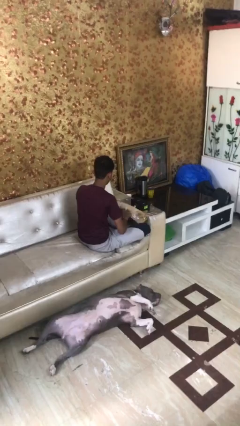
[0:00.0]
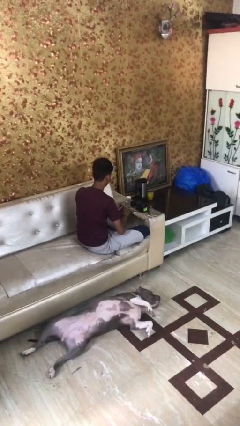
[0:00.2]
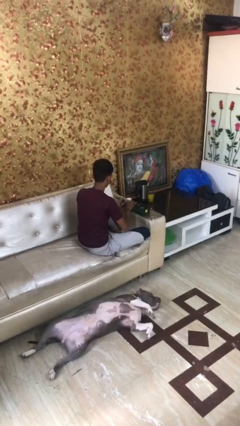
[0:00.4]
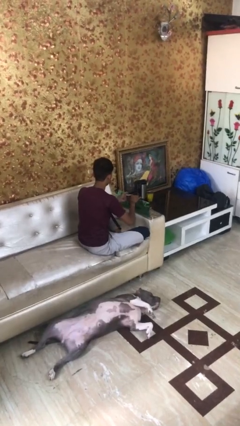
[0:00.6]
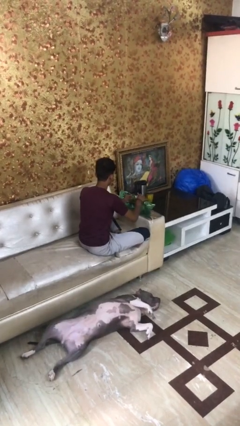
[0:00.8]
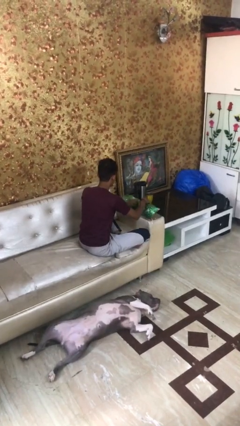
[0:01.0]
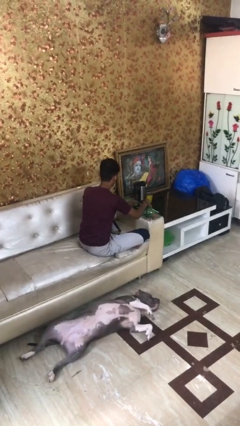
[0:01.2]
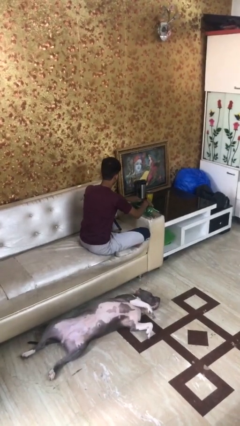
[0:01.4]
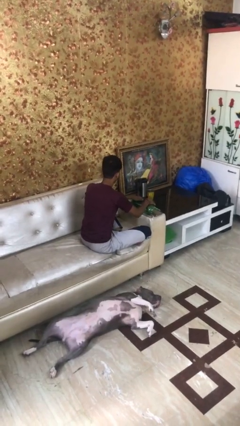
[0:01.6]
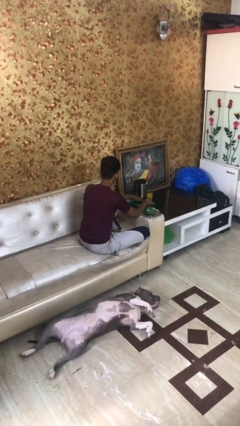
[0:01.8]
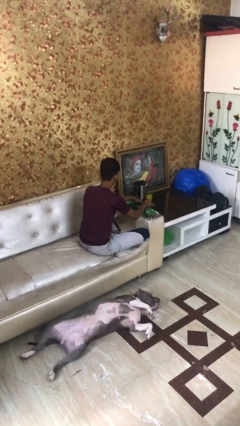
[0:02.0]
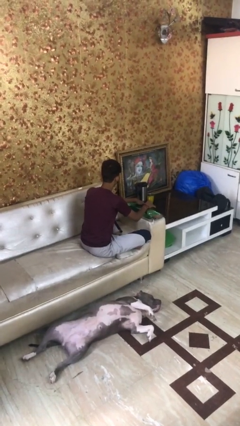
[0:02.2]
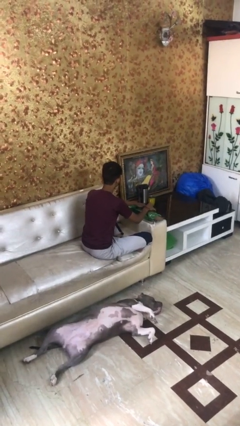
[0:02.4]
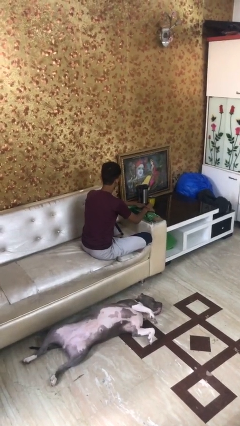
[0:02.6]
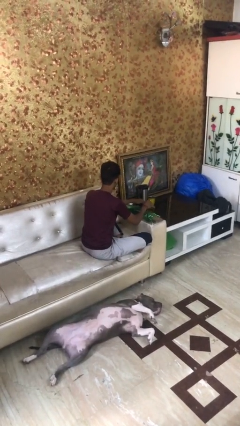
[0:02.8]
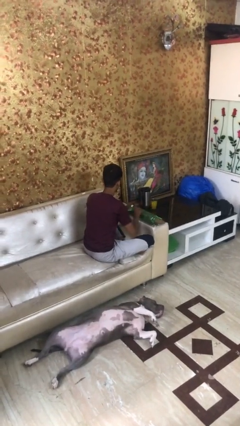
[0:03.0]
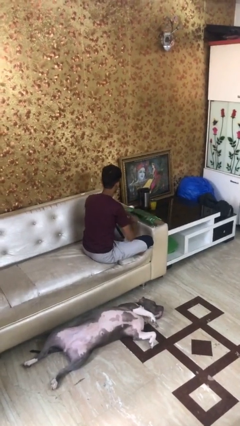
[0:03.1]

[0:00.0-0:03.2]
person wraps box

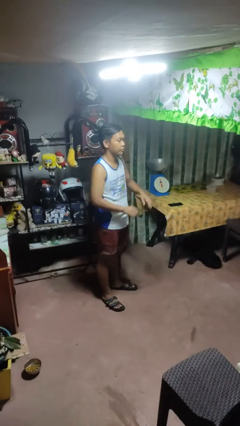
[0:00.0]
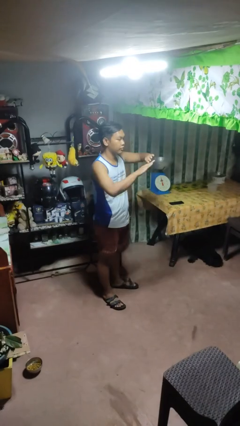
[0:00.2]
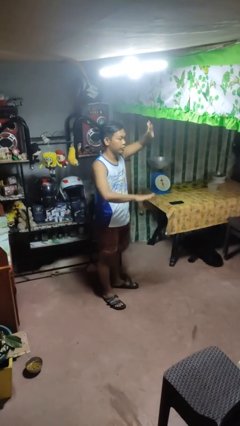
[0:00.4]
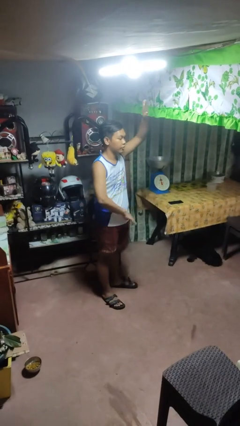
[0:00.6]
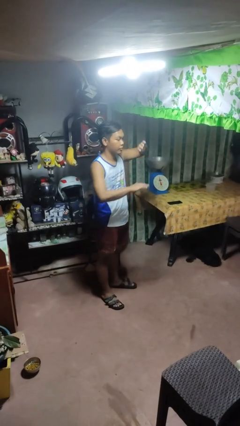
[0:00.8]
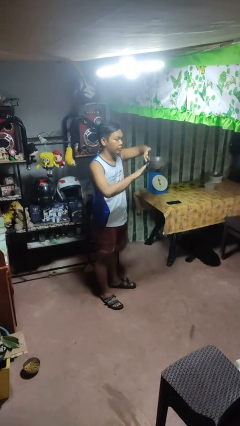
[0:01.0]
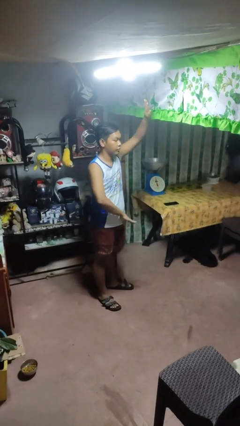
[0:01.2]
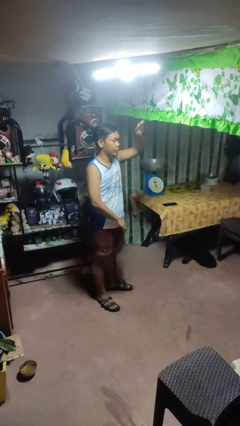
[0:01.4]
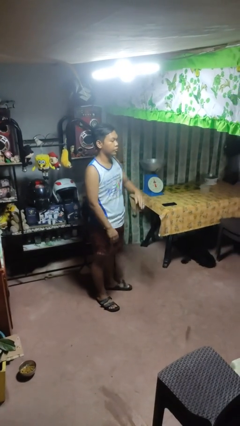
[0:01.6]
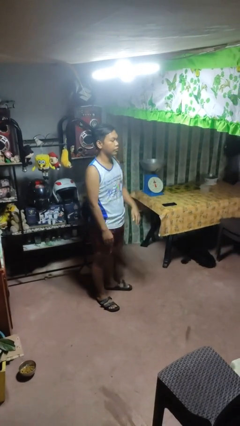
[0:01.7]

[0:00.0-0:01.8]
person gestures zoom in

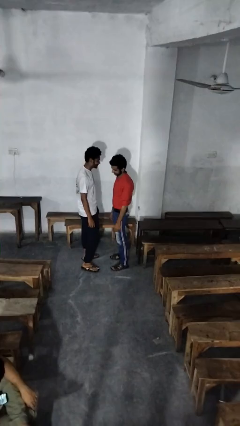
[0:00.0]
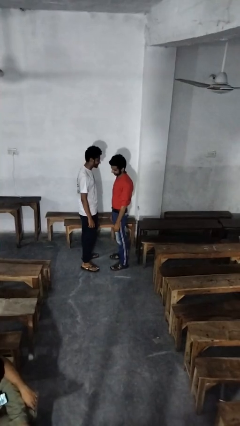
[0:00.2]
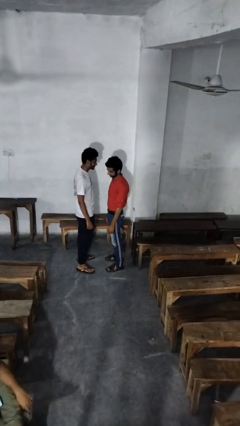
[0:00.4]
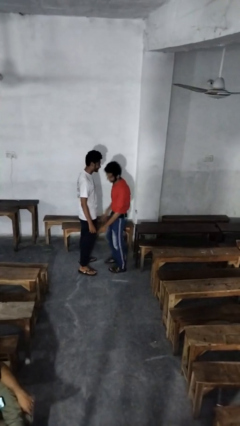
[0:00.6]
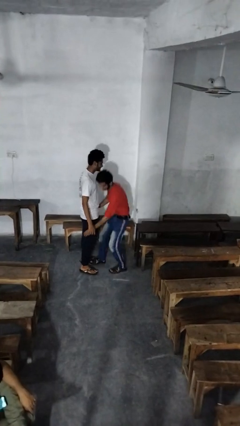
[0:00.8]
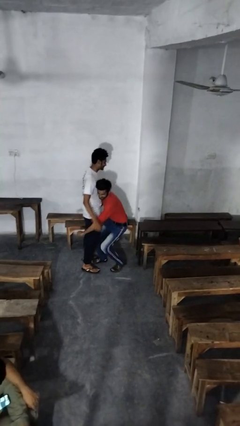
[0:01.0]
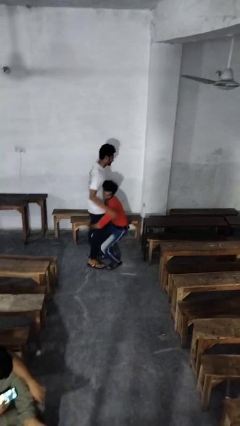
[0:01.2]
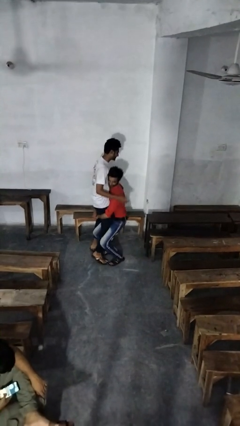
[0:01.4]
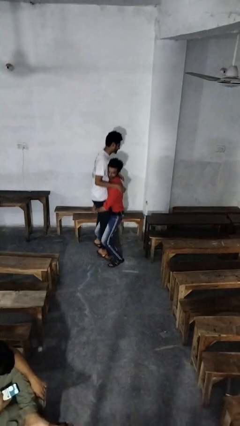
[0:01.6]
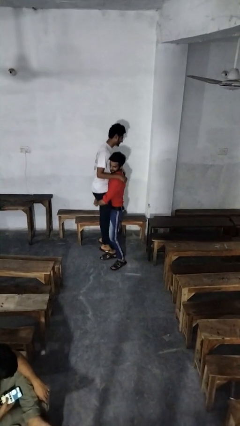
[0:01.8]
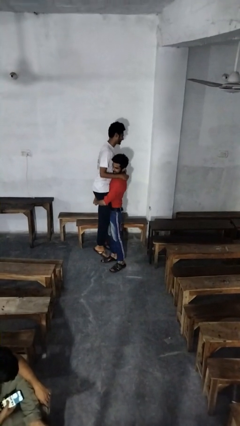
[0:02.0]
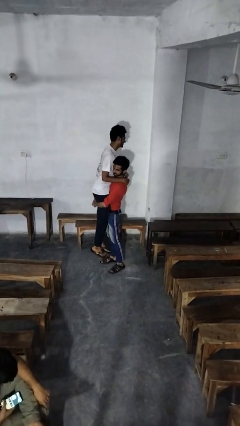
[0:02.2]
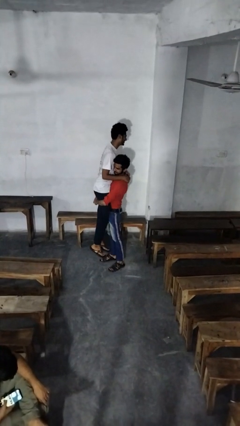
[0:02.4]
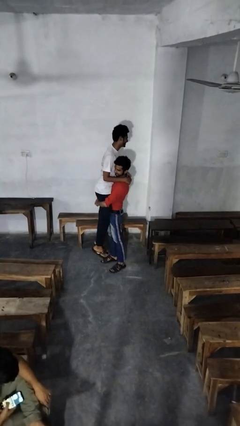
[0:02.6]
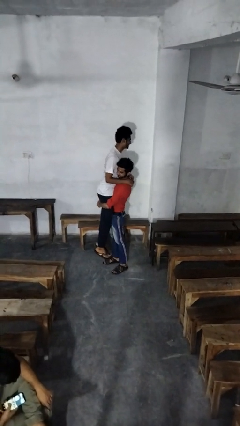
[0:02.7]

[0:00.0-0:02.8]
person picks up person

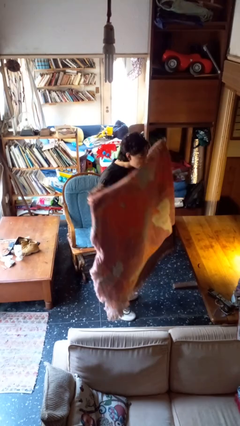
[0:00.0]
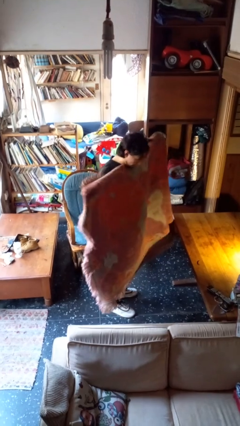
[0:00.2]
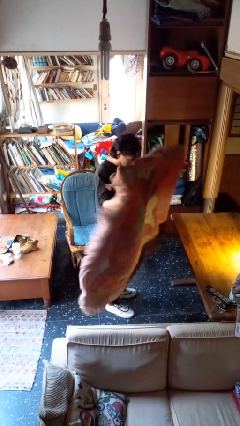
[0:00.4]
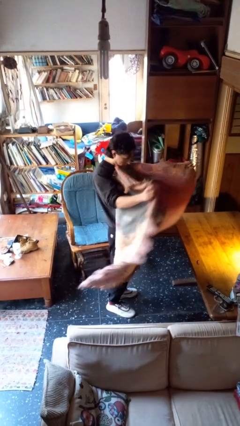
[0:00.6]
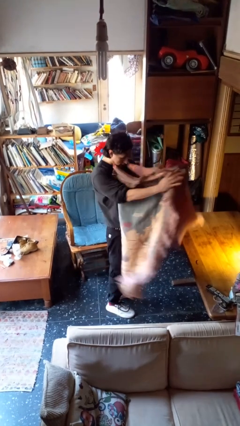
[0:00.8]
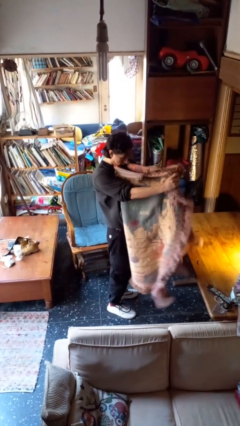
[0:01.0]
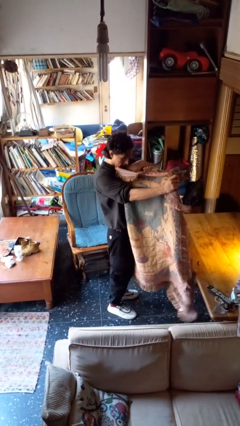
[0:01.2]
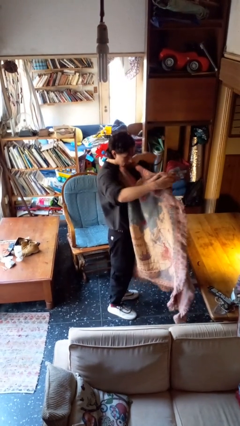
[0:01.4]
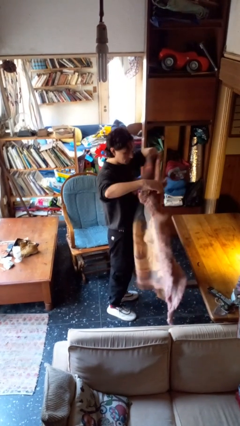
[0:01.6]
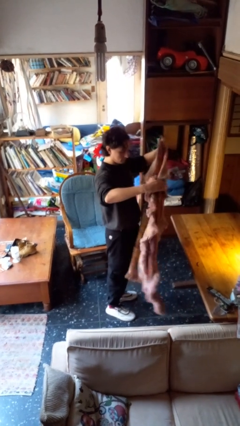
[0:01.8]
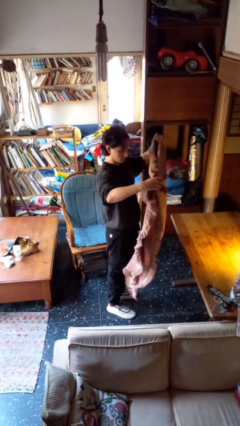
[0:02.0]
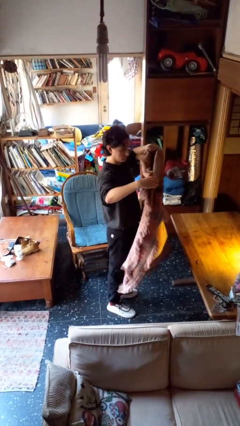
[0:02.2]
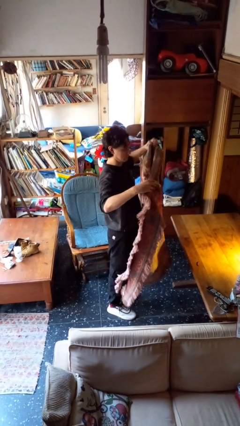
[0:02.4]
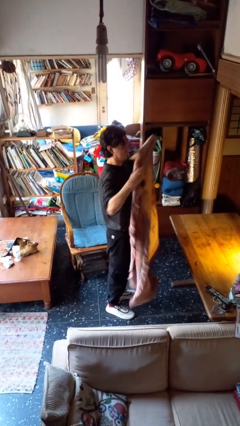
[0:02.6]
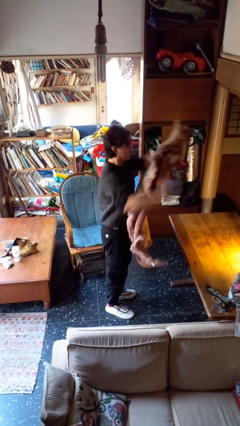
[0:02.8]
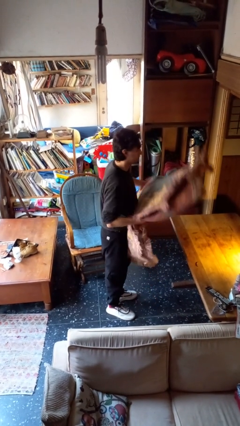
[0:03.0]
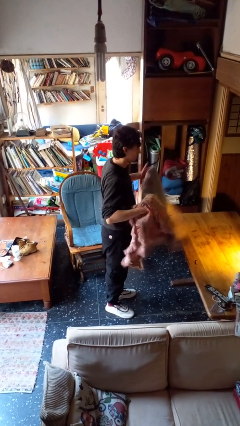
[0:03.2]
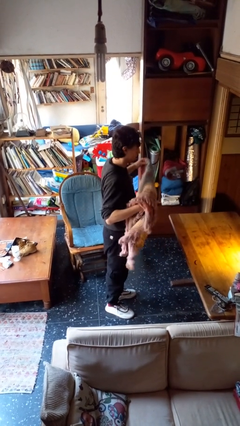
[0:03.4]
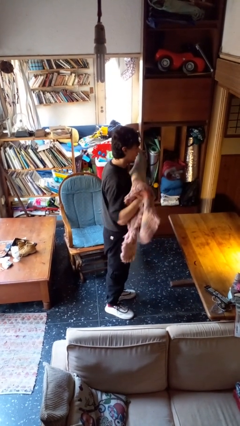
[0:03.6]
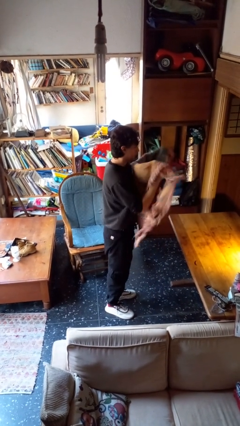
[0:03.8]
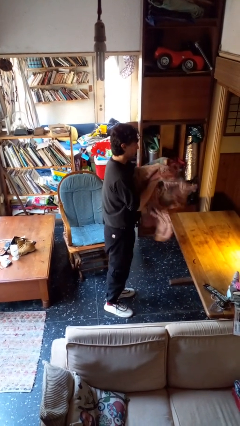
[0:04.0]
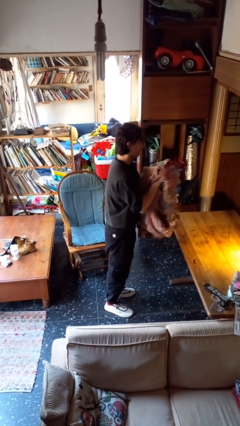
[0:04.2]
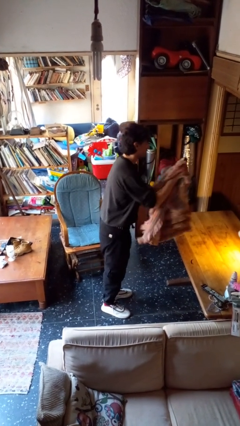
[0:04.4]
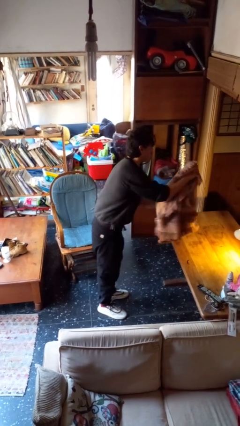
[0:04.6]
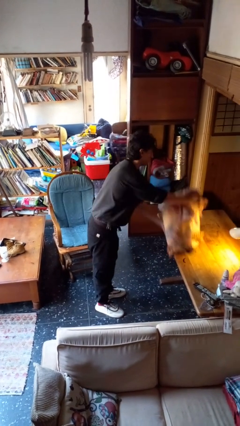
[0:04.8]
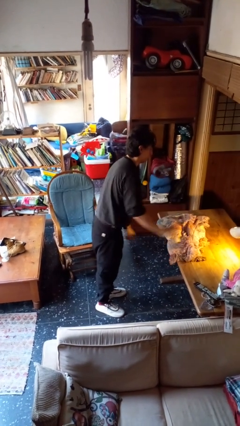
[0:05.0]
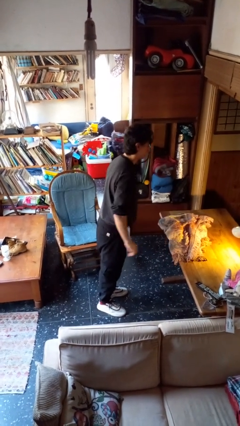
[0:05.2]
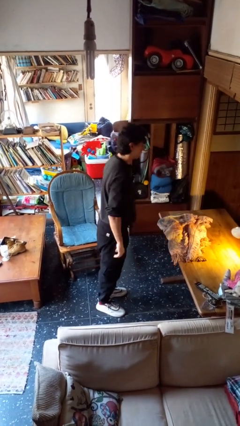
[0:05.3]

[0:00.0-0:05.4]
person folds blanket

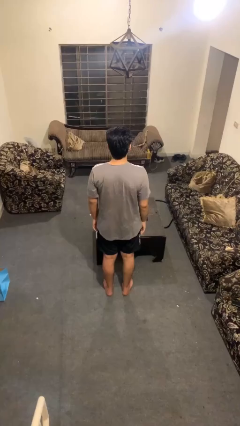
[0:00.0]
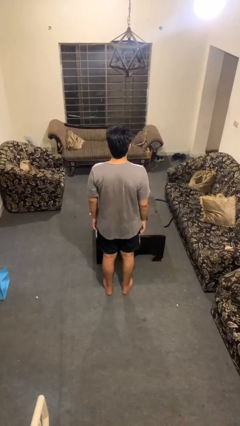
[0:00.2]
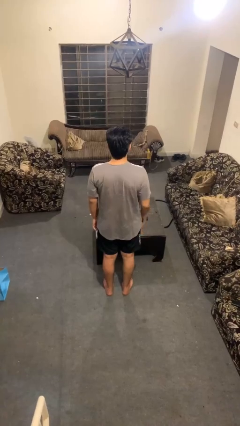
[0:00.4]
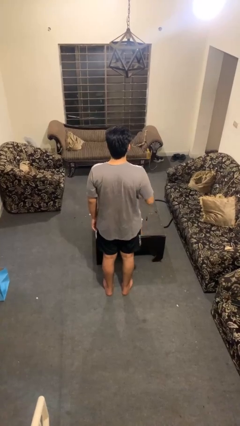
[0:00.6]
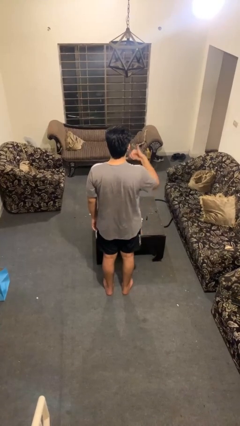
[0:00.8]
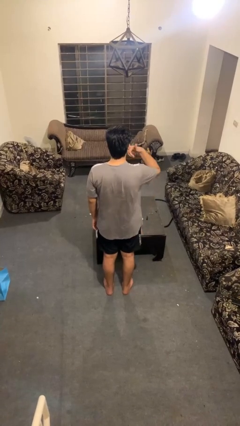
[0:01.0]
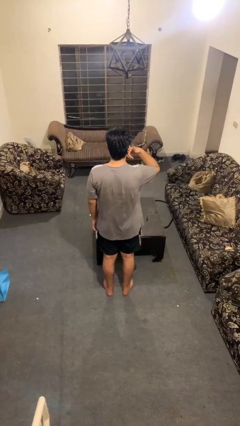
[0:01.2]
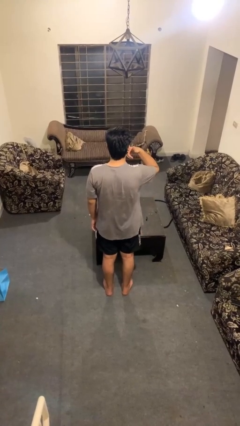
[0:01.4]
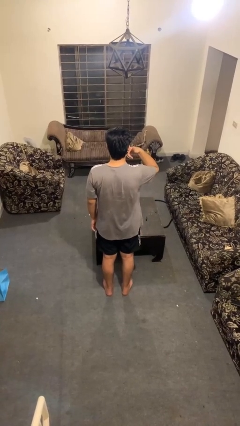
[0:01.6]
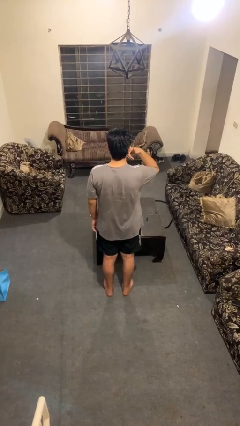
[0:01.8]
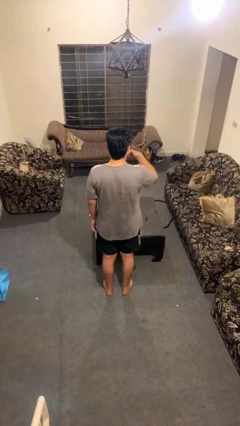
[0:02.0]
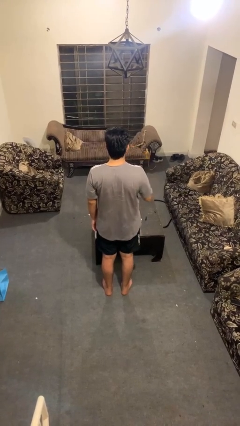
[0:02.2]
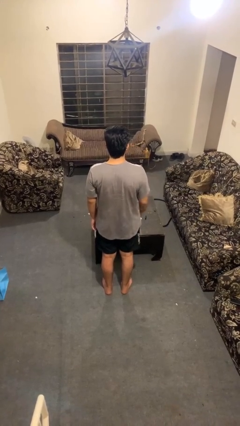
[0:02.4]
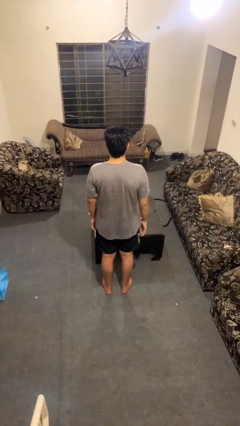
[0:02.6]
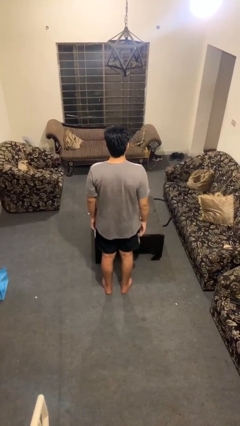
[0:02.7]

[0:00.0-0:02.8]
person gestures call me

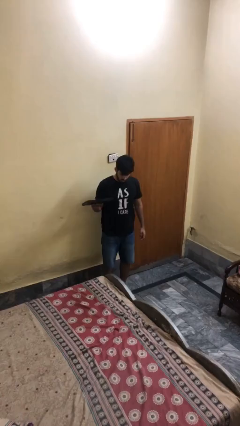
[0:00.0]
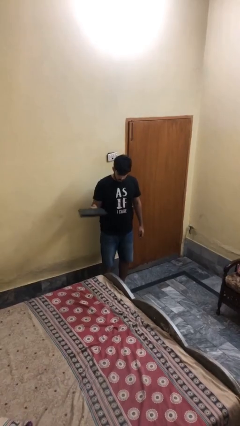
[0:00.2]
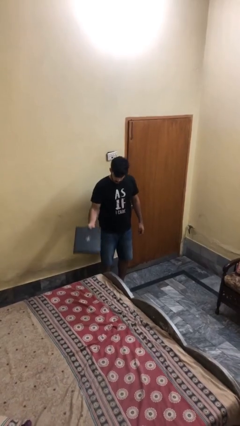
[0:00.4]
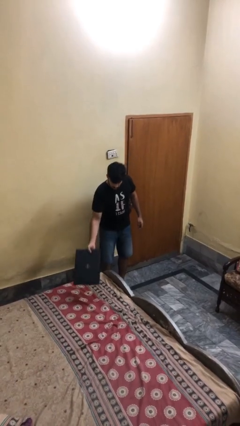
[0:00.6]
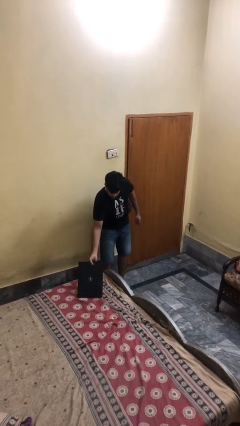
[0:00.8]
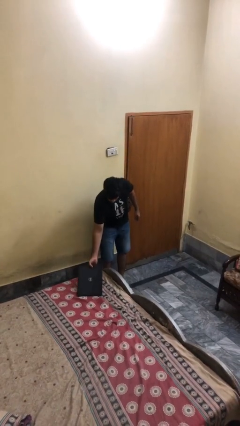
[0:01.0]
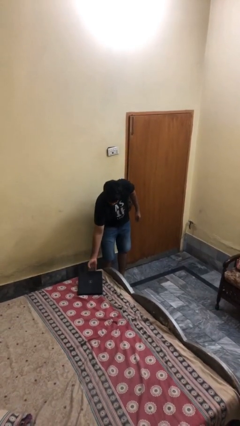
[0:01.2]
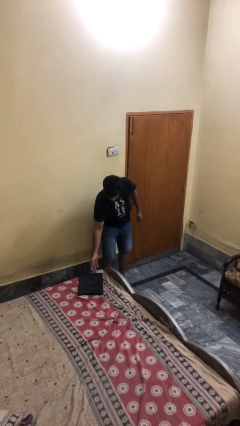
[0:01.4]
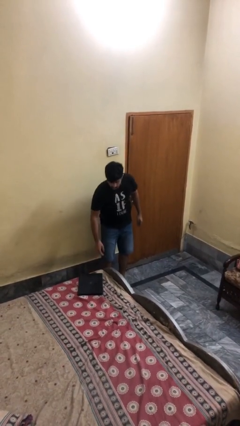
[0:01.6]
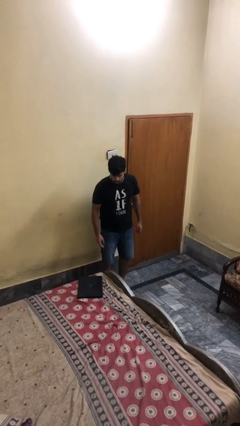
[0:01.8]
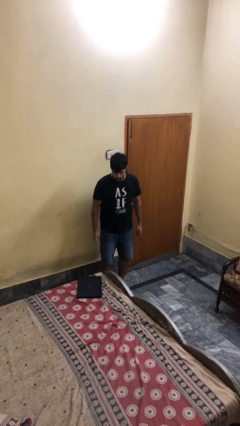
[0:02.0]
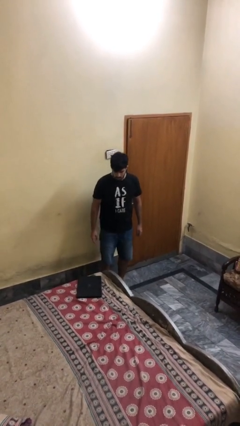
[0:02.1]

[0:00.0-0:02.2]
person puts down object on bed
